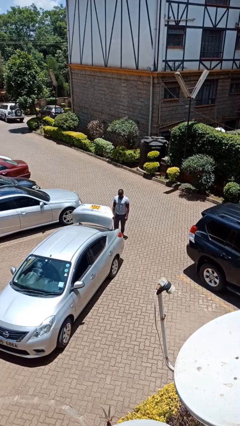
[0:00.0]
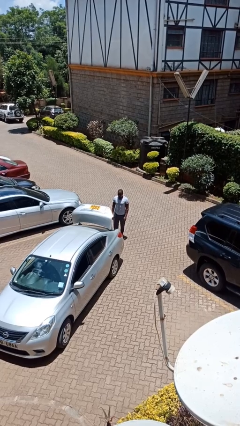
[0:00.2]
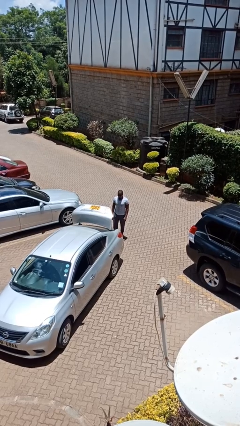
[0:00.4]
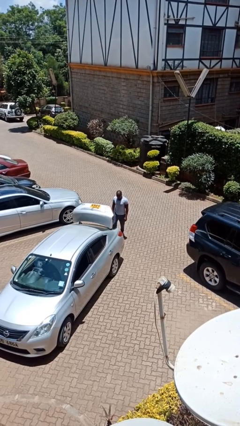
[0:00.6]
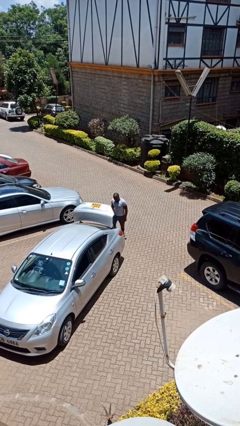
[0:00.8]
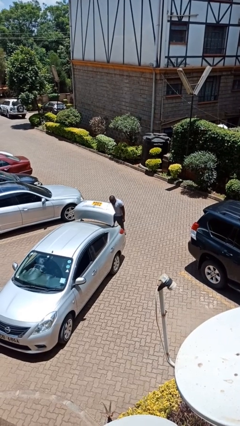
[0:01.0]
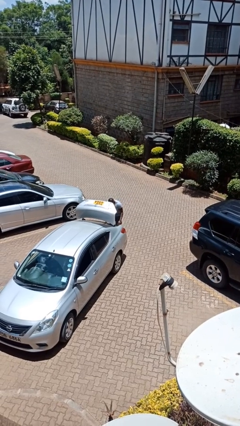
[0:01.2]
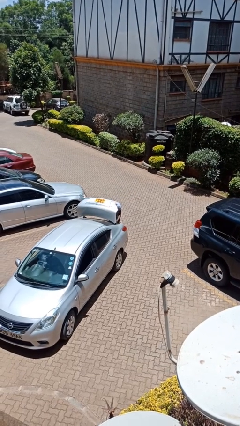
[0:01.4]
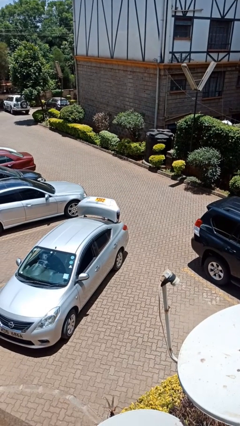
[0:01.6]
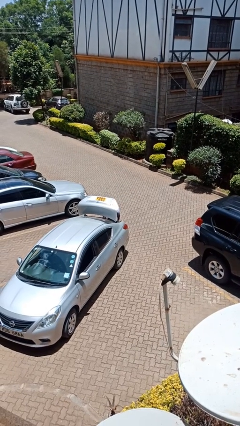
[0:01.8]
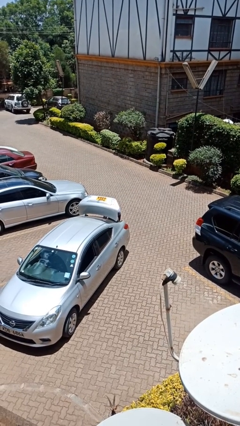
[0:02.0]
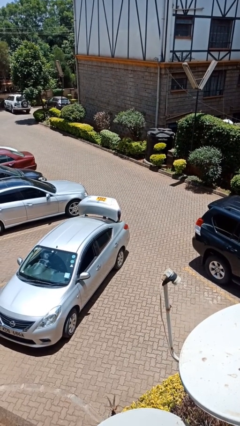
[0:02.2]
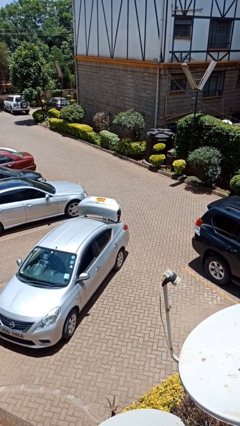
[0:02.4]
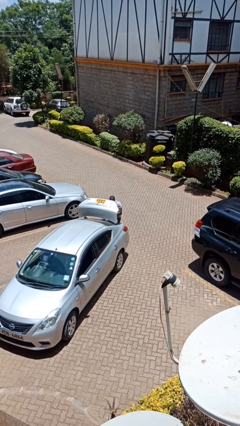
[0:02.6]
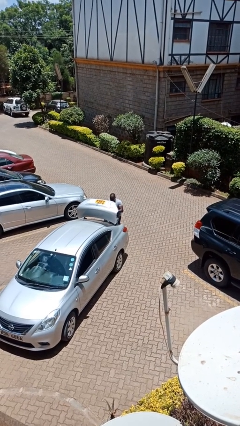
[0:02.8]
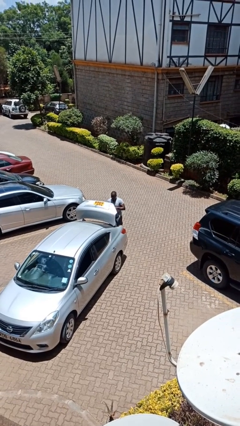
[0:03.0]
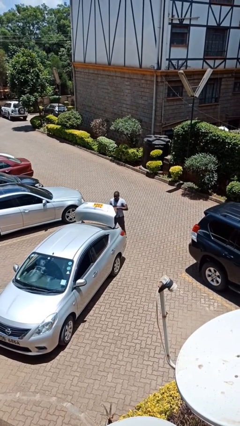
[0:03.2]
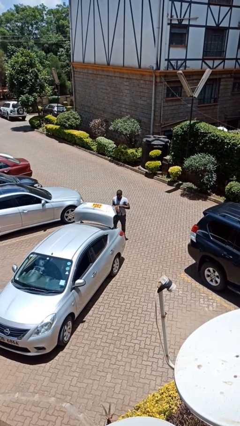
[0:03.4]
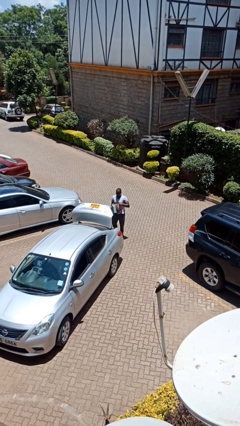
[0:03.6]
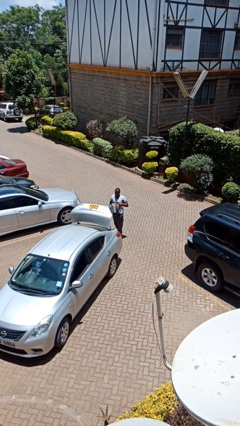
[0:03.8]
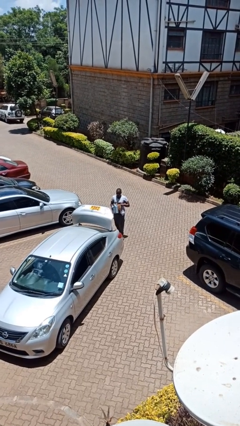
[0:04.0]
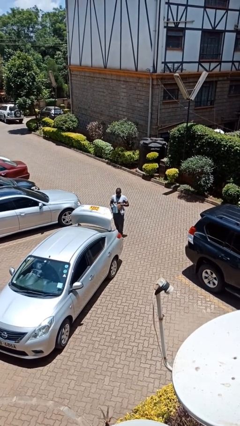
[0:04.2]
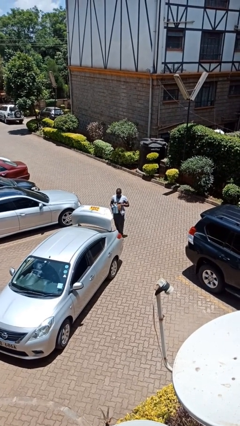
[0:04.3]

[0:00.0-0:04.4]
person unloads car

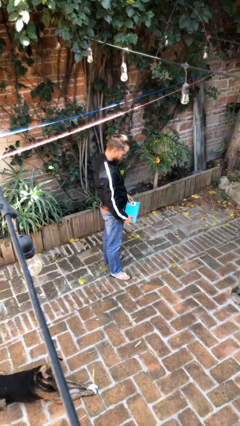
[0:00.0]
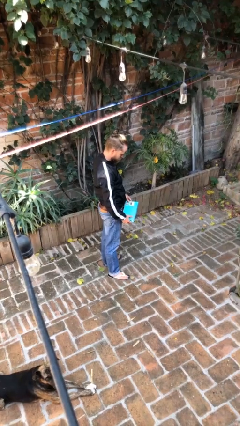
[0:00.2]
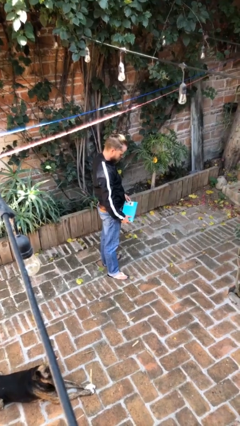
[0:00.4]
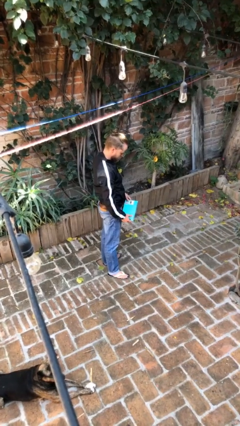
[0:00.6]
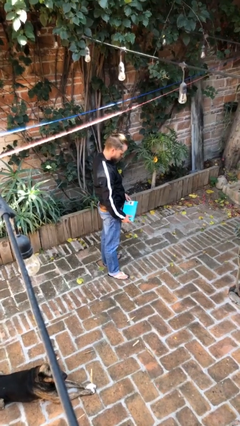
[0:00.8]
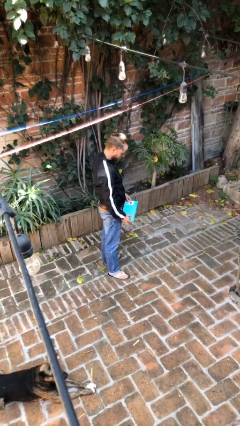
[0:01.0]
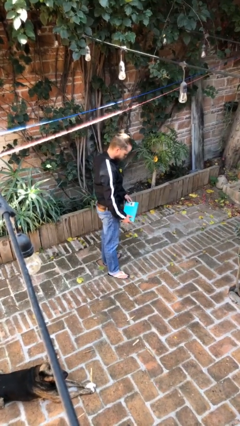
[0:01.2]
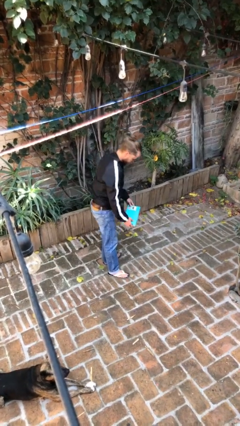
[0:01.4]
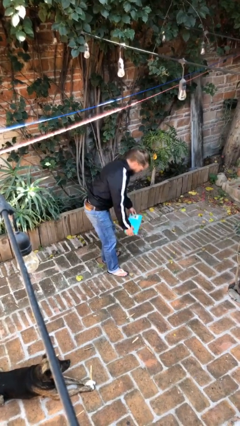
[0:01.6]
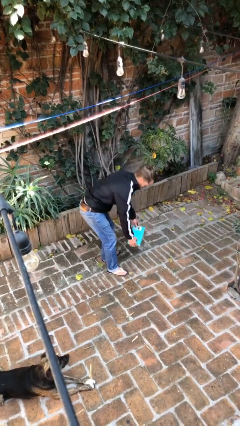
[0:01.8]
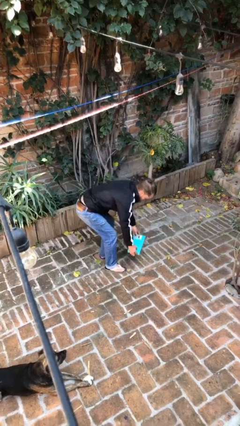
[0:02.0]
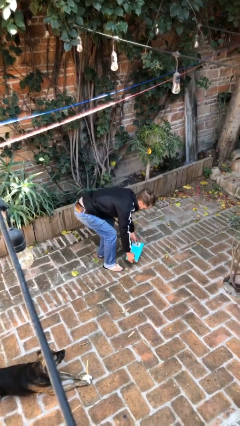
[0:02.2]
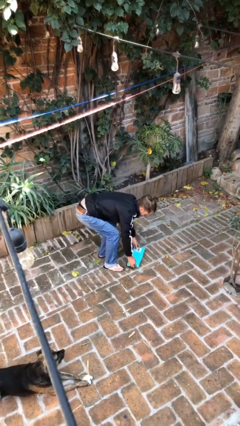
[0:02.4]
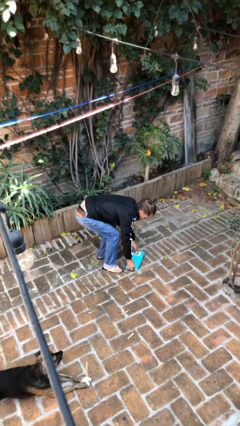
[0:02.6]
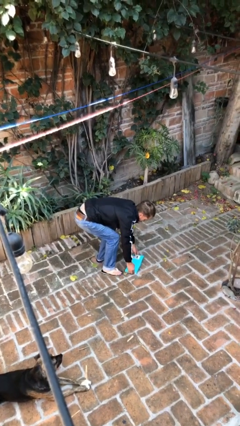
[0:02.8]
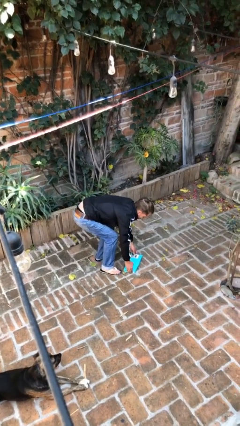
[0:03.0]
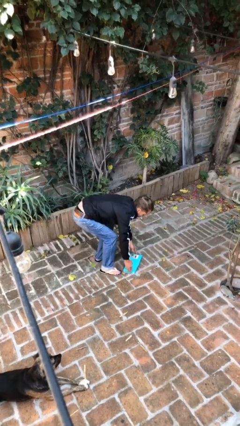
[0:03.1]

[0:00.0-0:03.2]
person puts down object on floor

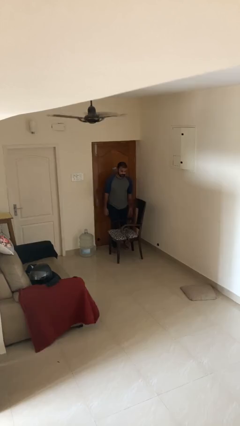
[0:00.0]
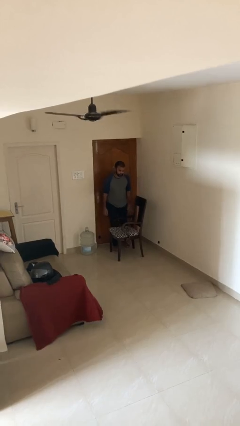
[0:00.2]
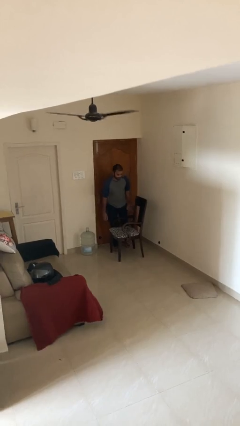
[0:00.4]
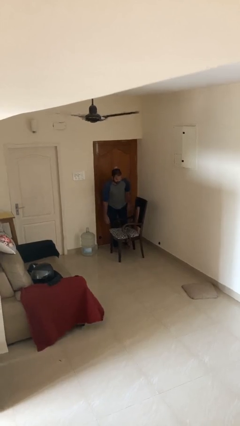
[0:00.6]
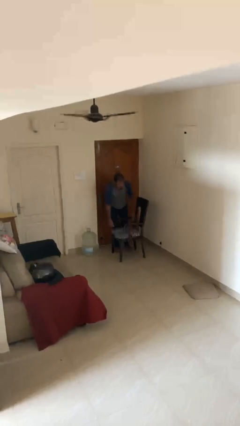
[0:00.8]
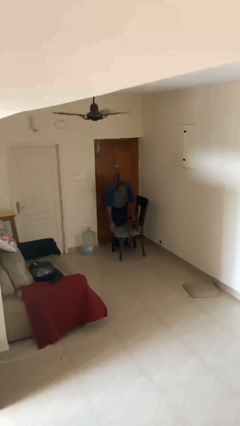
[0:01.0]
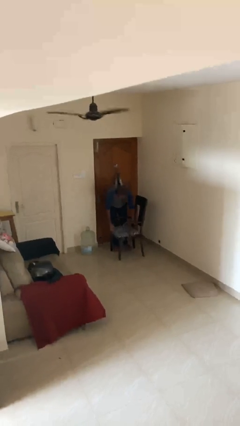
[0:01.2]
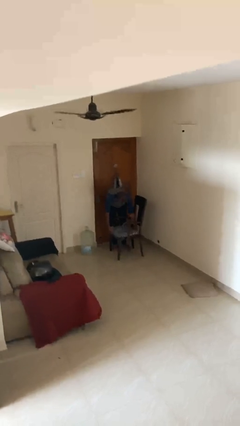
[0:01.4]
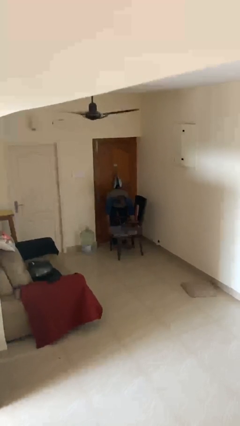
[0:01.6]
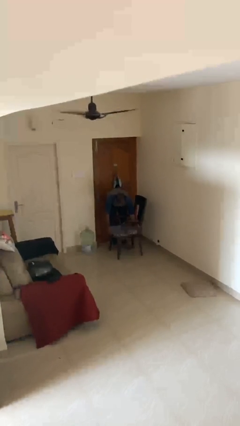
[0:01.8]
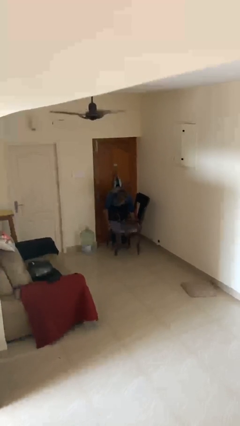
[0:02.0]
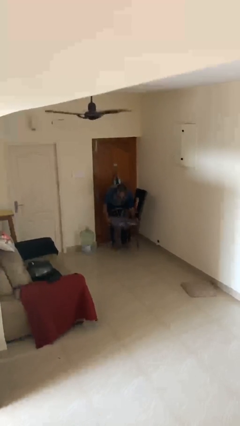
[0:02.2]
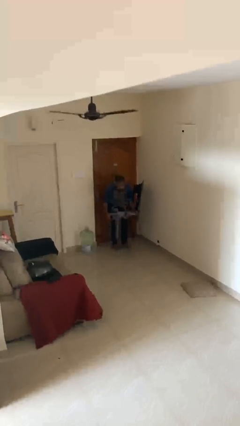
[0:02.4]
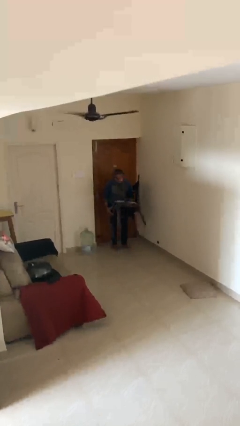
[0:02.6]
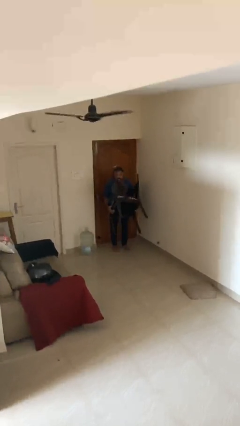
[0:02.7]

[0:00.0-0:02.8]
person picks up object from floor

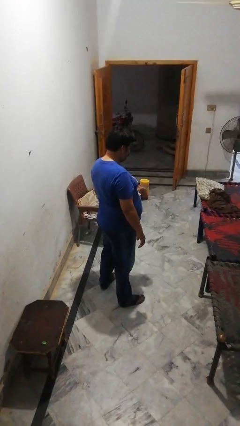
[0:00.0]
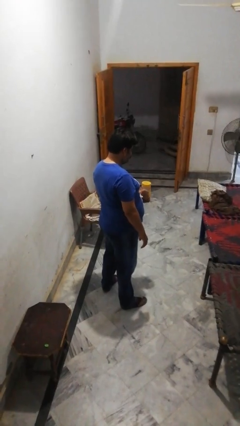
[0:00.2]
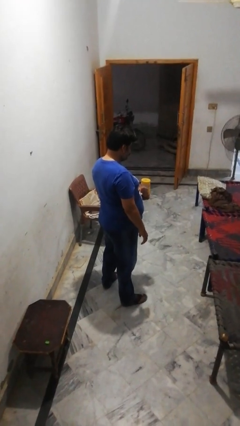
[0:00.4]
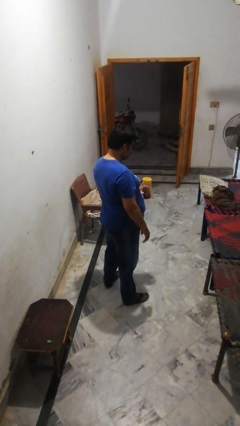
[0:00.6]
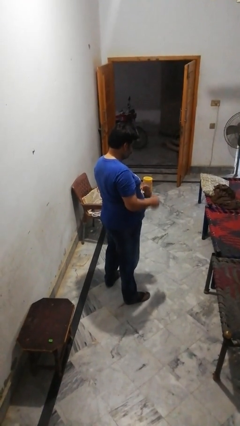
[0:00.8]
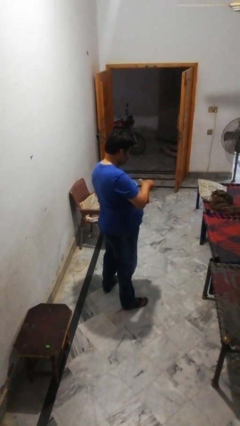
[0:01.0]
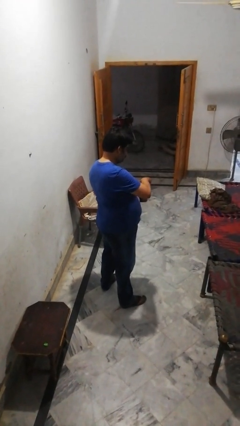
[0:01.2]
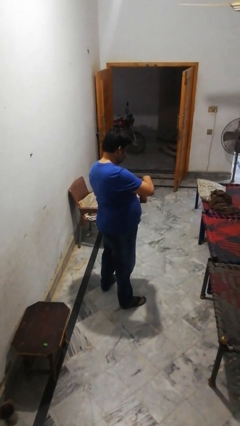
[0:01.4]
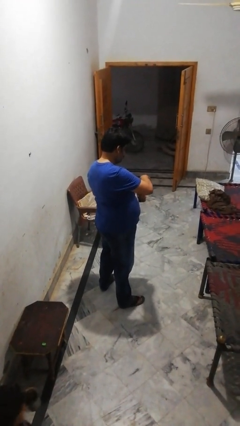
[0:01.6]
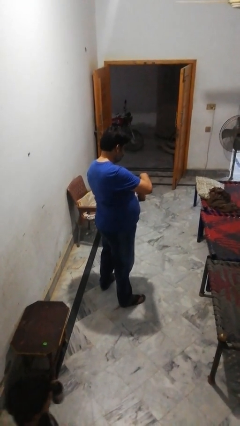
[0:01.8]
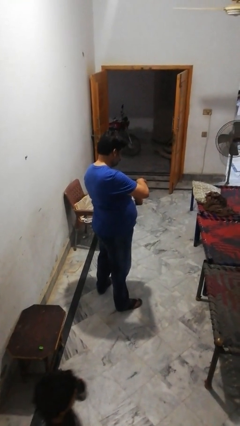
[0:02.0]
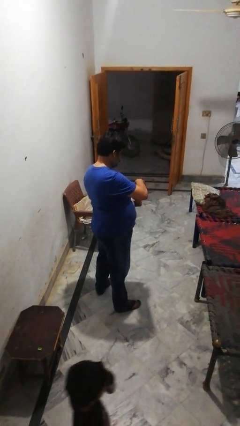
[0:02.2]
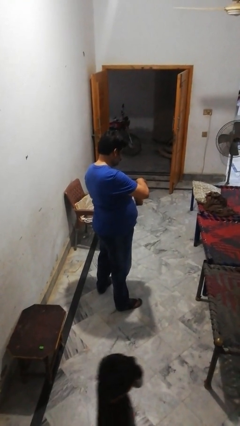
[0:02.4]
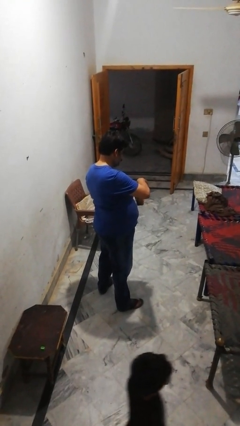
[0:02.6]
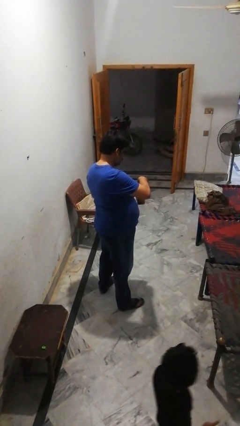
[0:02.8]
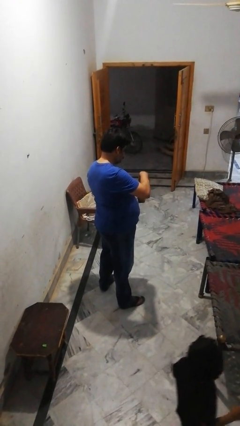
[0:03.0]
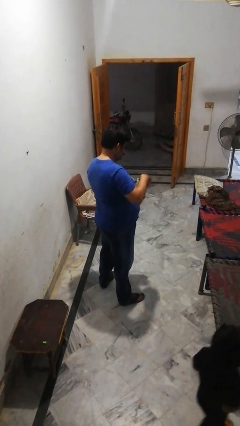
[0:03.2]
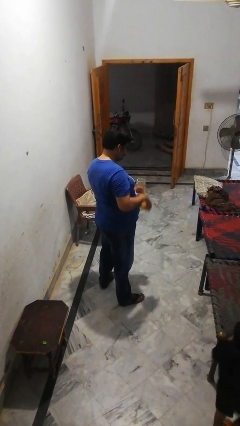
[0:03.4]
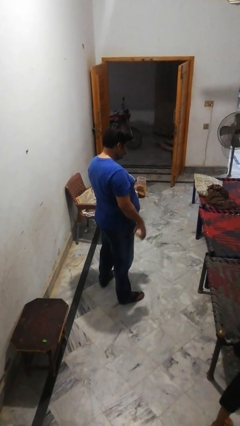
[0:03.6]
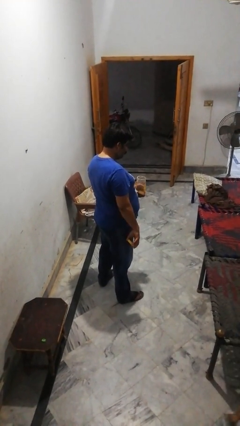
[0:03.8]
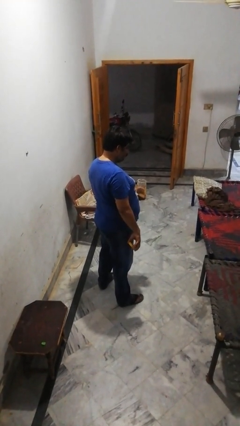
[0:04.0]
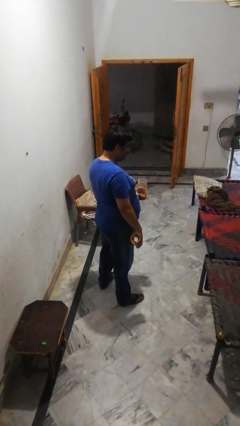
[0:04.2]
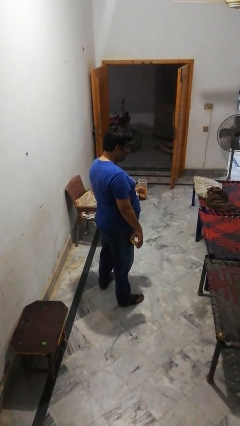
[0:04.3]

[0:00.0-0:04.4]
person opens jar

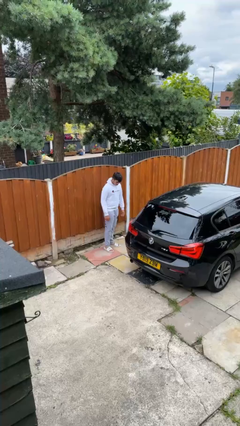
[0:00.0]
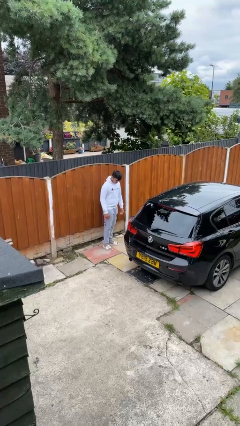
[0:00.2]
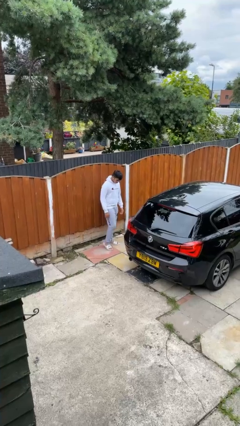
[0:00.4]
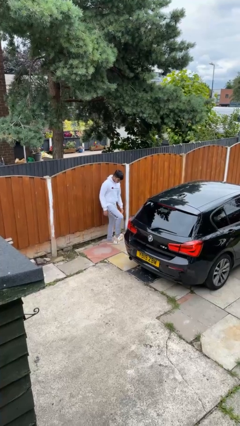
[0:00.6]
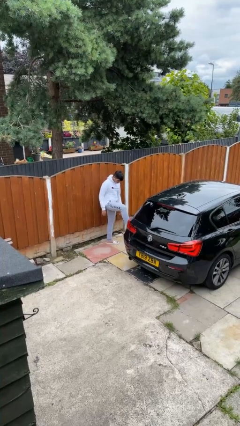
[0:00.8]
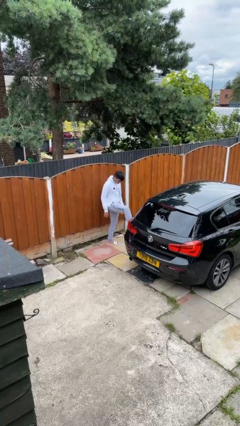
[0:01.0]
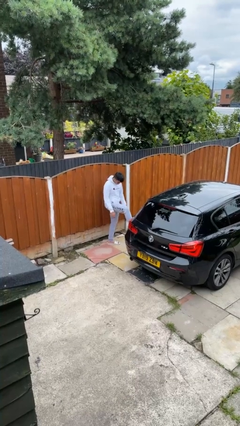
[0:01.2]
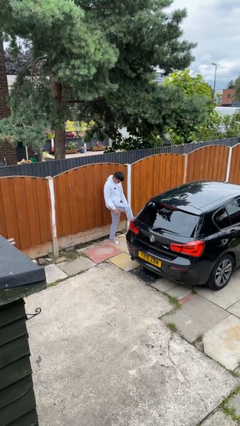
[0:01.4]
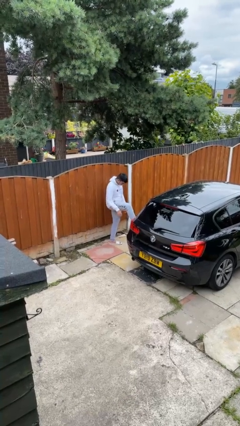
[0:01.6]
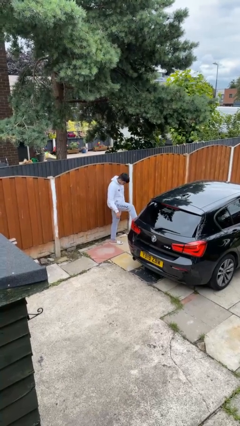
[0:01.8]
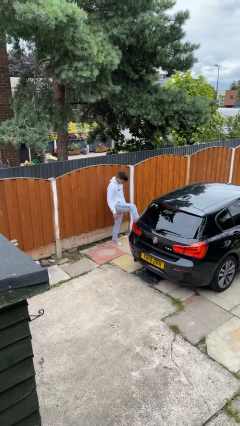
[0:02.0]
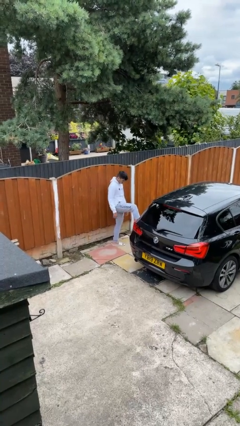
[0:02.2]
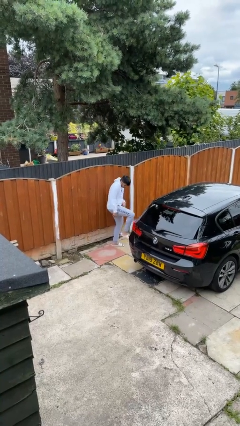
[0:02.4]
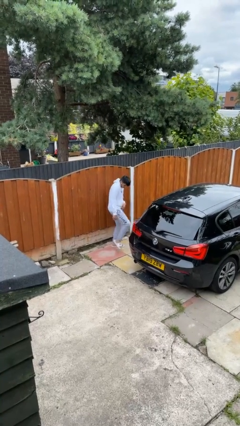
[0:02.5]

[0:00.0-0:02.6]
person kicks car tires

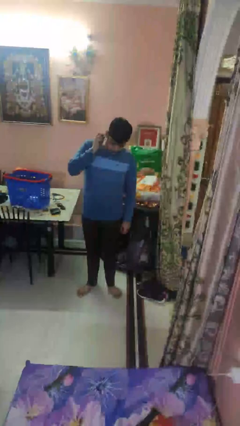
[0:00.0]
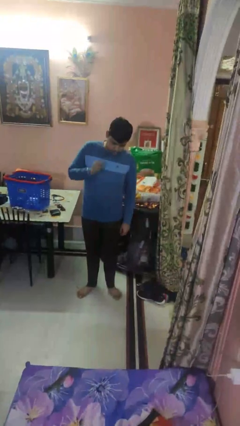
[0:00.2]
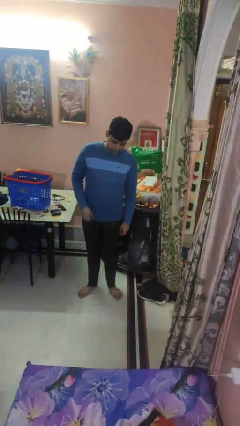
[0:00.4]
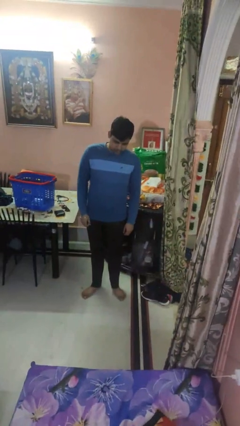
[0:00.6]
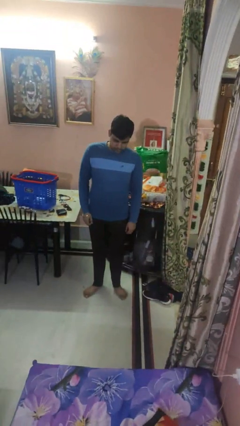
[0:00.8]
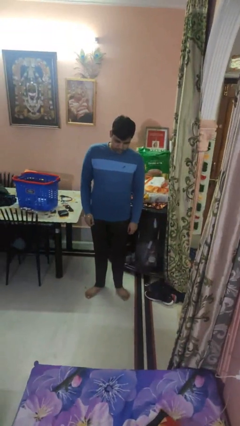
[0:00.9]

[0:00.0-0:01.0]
person puts on earrings
